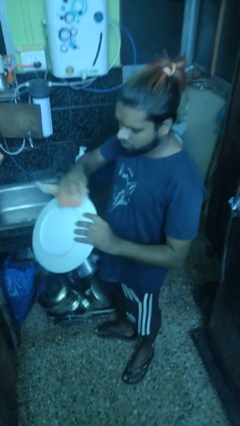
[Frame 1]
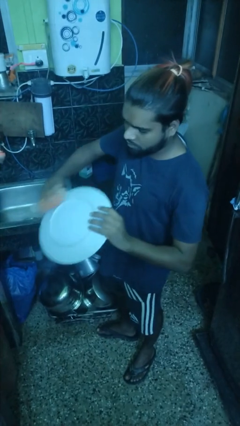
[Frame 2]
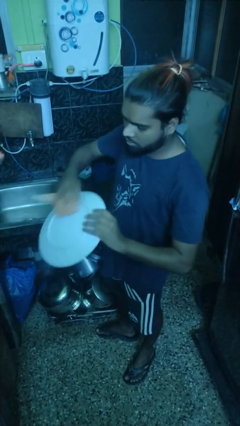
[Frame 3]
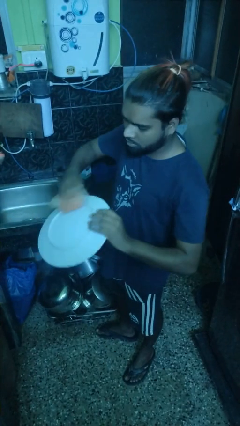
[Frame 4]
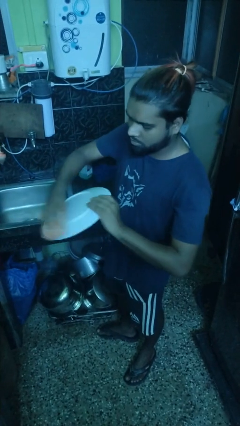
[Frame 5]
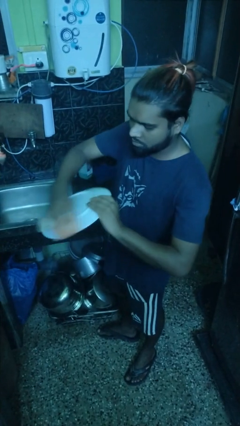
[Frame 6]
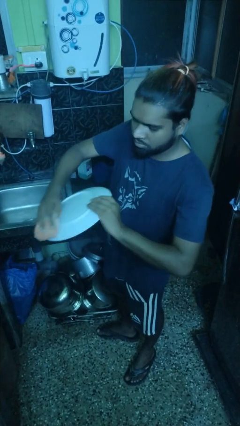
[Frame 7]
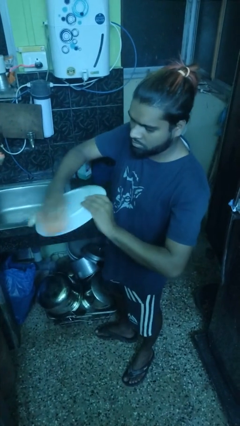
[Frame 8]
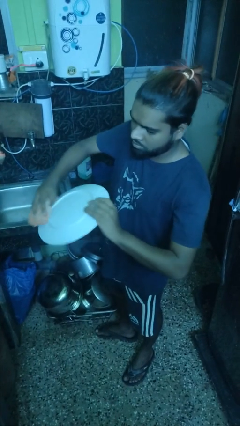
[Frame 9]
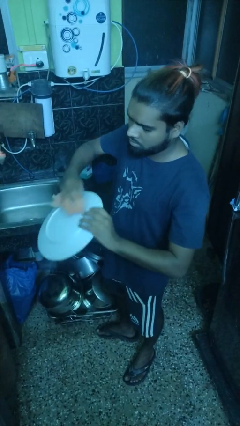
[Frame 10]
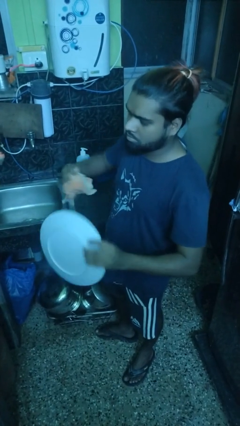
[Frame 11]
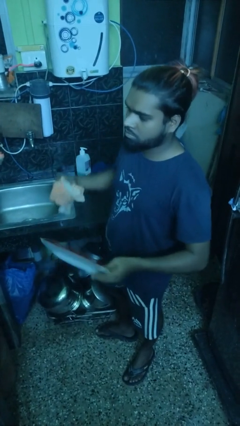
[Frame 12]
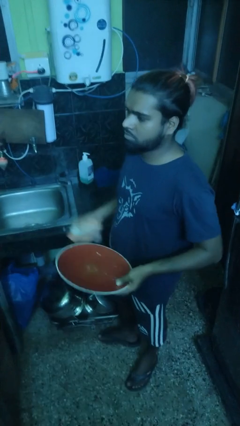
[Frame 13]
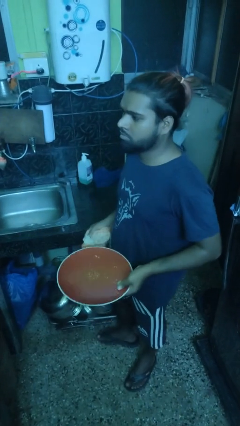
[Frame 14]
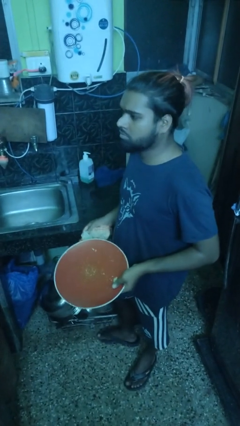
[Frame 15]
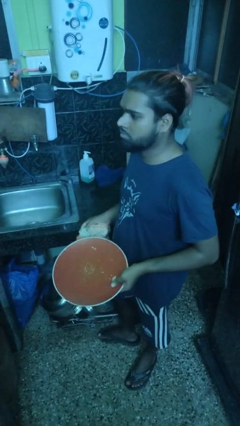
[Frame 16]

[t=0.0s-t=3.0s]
person dries dish

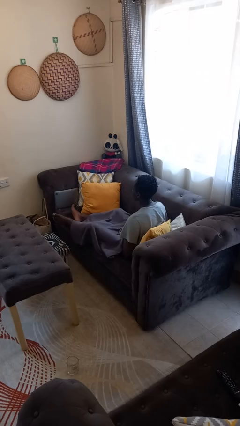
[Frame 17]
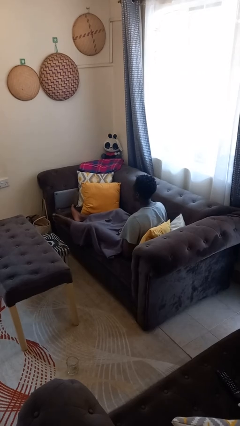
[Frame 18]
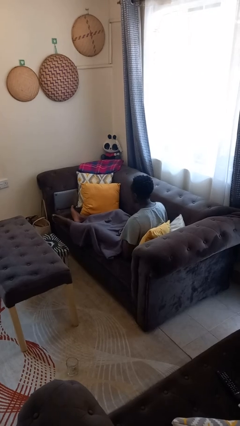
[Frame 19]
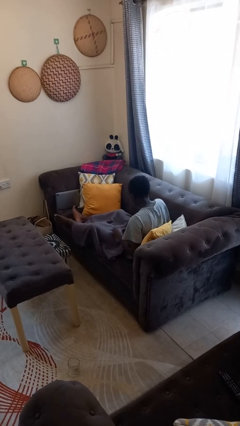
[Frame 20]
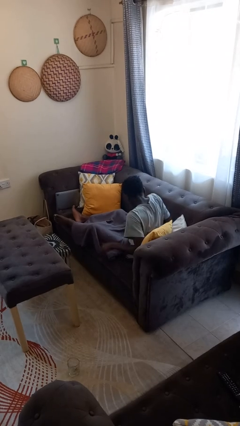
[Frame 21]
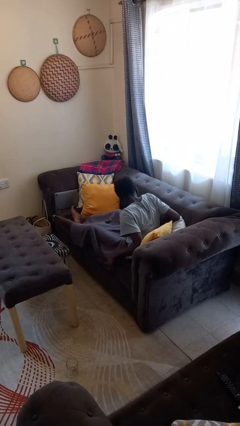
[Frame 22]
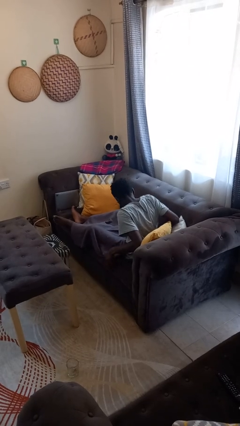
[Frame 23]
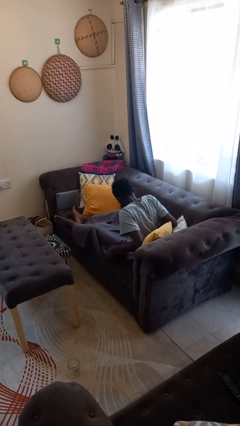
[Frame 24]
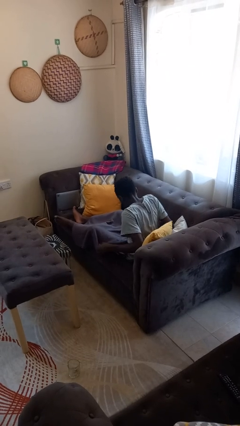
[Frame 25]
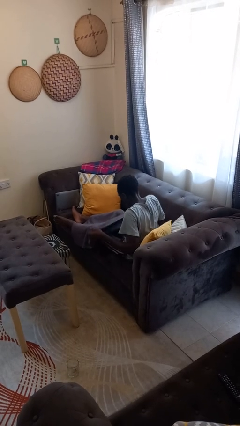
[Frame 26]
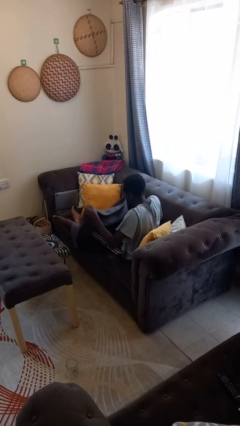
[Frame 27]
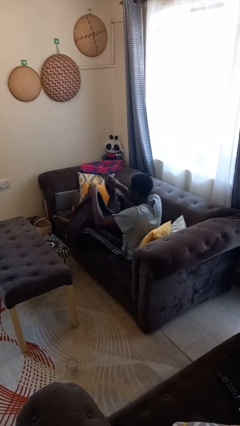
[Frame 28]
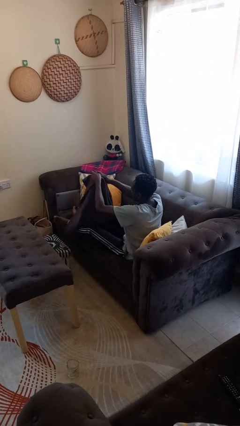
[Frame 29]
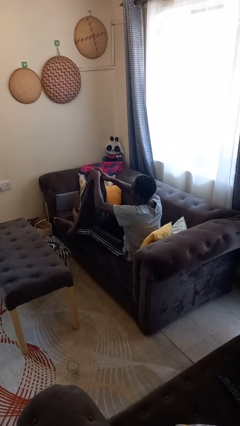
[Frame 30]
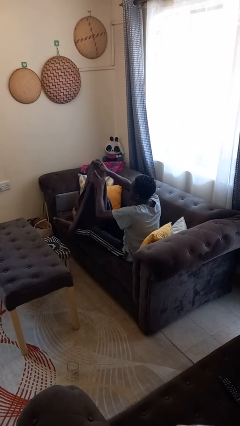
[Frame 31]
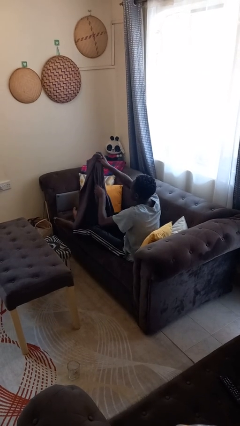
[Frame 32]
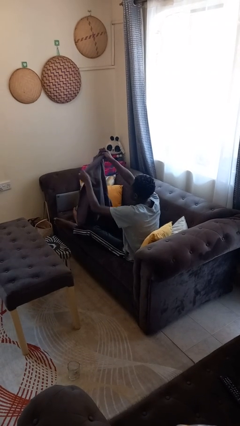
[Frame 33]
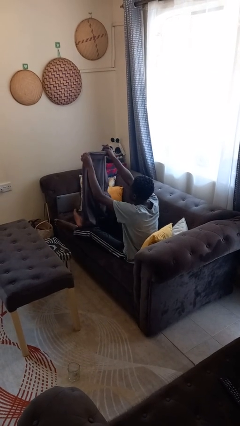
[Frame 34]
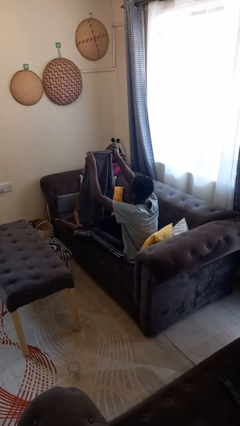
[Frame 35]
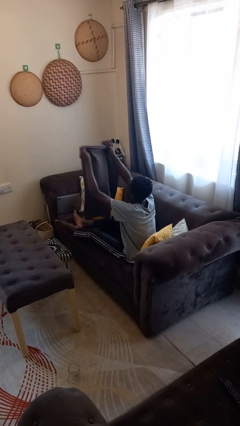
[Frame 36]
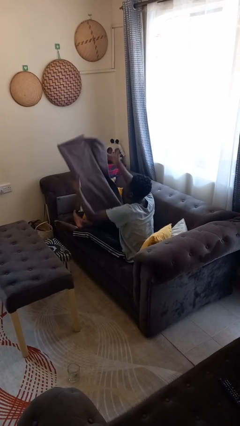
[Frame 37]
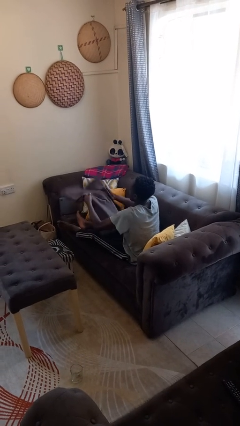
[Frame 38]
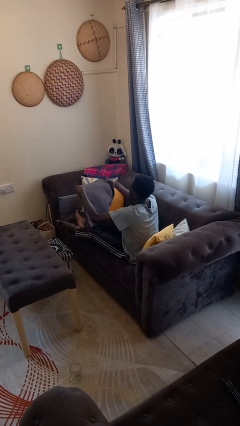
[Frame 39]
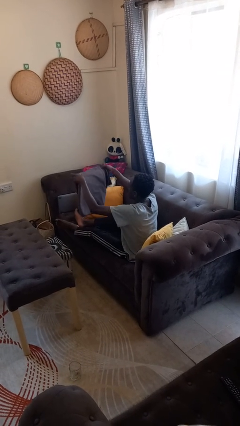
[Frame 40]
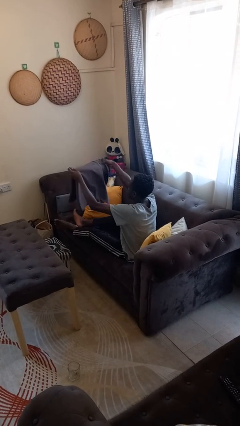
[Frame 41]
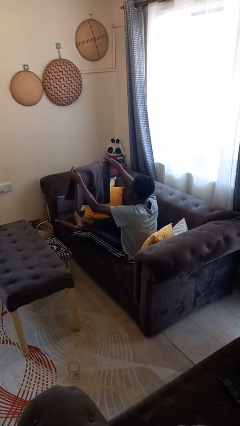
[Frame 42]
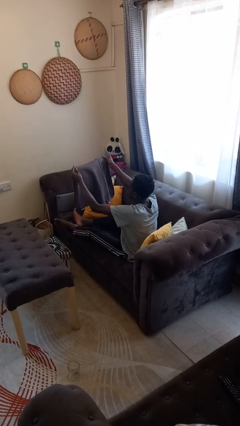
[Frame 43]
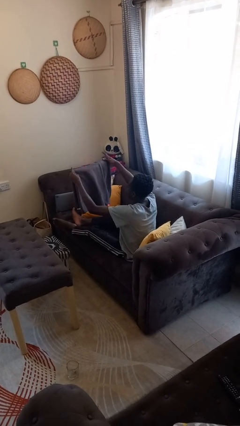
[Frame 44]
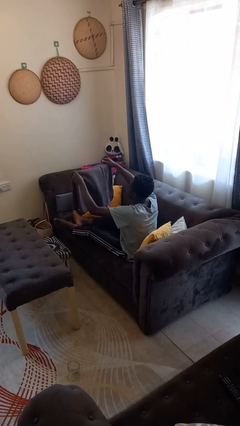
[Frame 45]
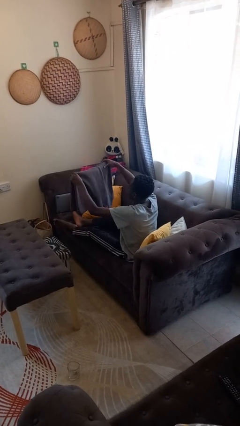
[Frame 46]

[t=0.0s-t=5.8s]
person folds blanket

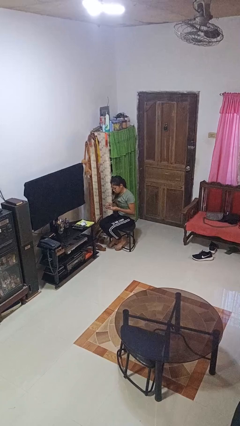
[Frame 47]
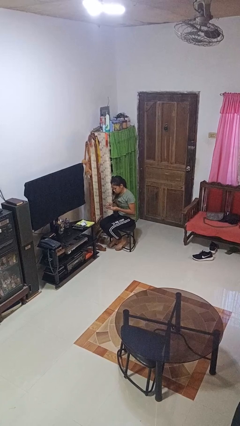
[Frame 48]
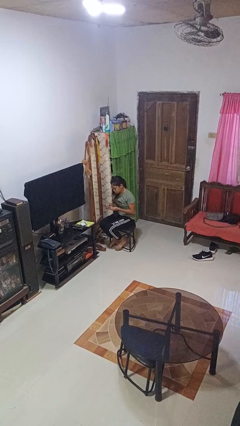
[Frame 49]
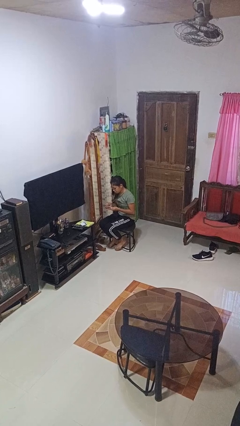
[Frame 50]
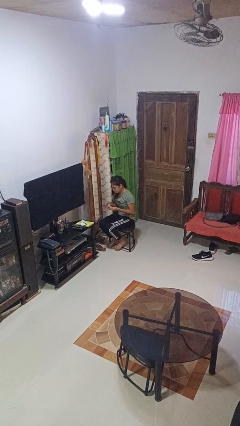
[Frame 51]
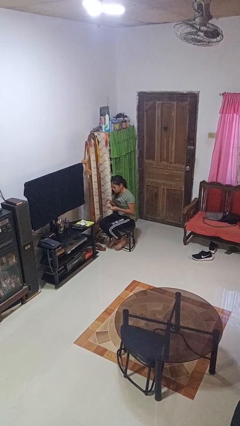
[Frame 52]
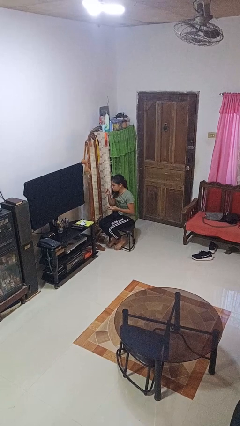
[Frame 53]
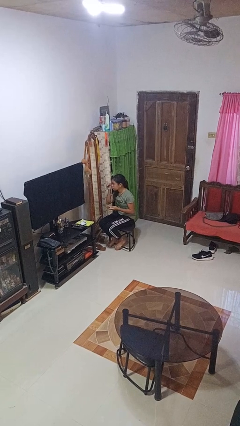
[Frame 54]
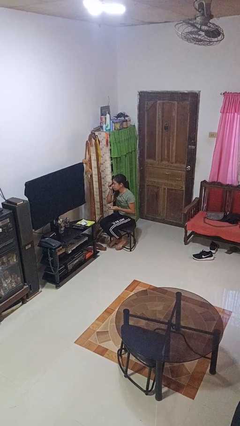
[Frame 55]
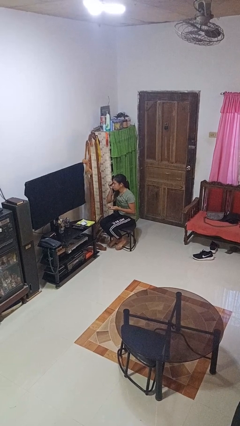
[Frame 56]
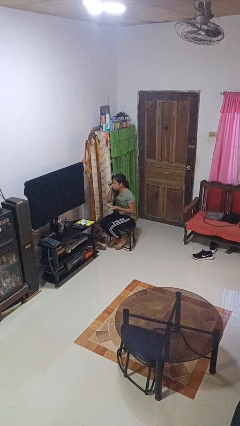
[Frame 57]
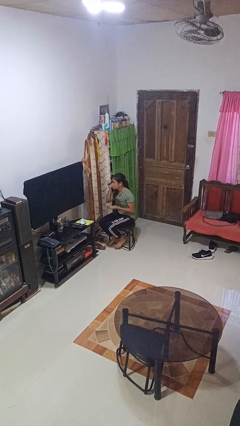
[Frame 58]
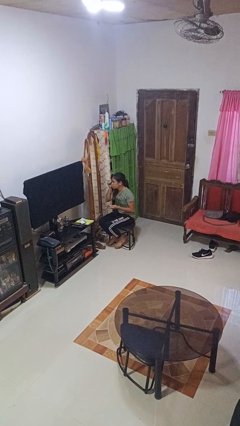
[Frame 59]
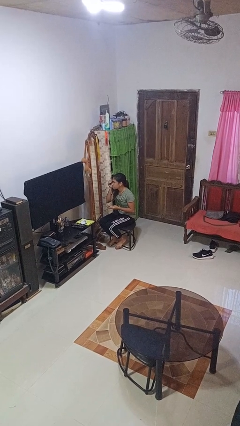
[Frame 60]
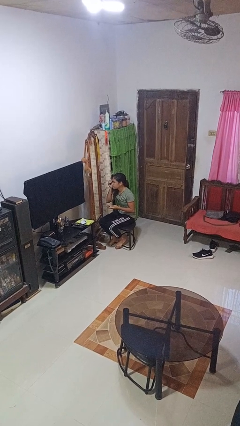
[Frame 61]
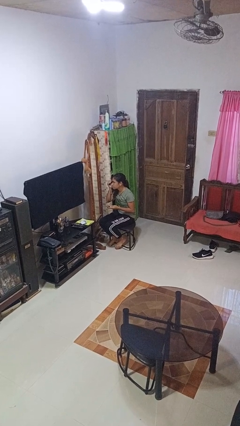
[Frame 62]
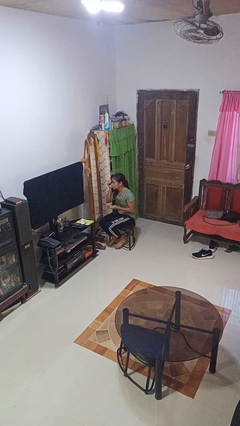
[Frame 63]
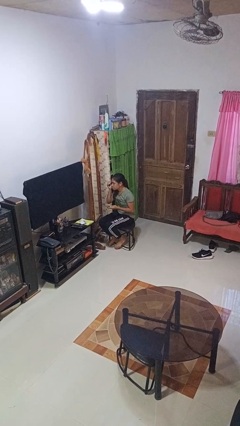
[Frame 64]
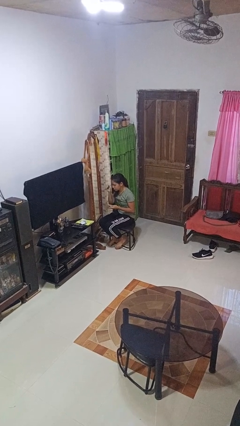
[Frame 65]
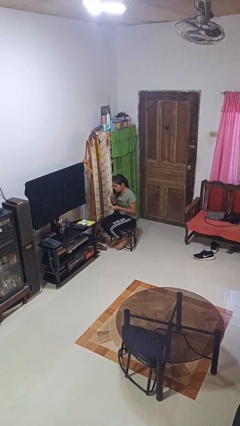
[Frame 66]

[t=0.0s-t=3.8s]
person applies eye makeup

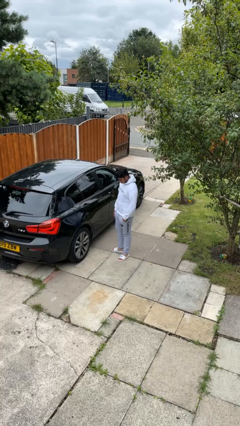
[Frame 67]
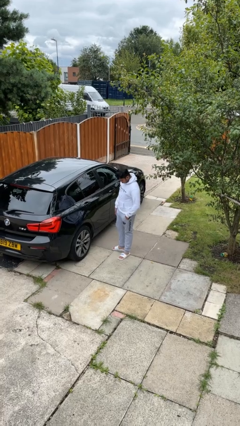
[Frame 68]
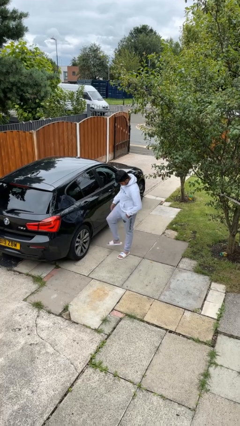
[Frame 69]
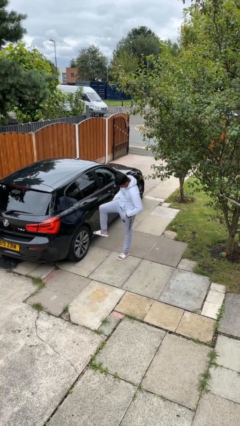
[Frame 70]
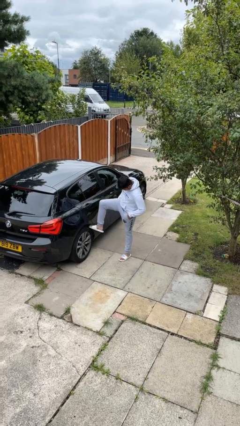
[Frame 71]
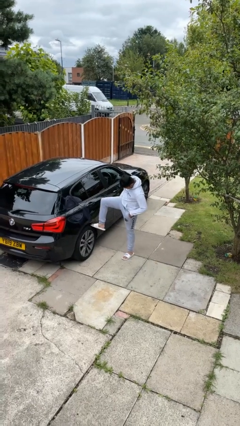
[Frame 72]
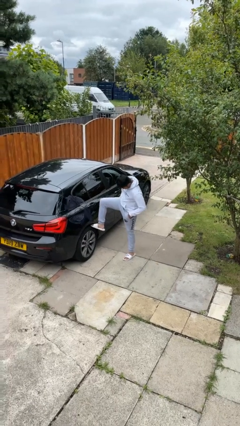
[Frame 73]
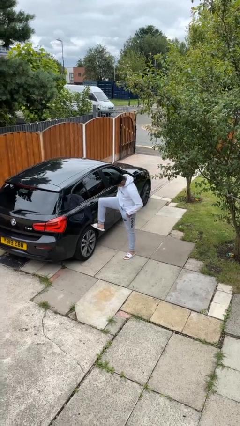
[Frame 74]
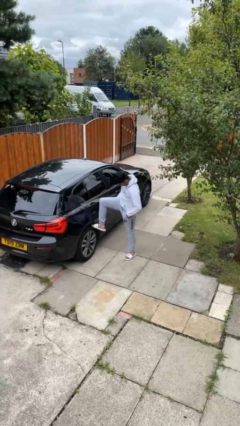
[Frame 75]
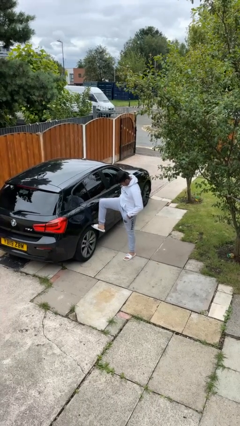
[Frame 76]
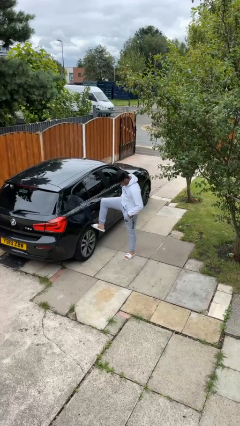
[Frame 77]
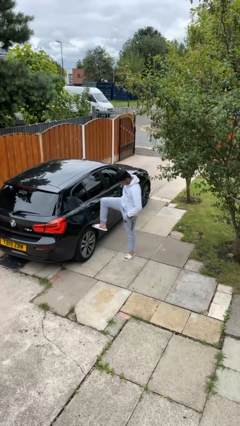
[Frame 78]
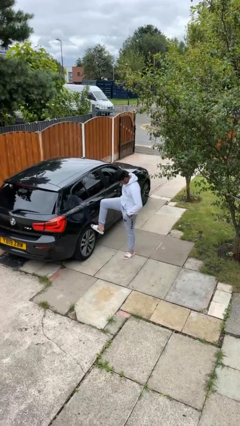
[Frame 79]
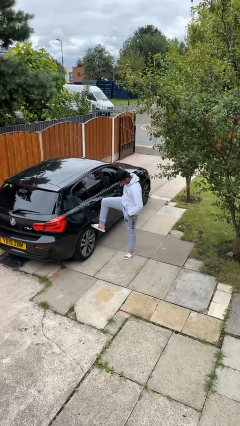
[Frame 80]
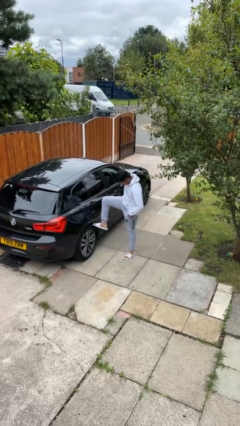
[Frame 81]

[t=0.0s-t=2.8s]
person kicks car tires

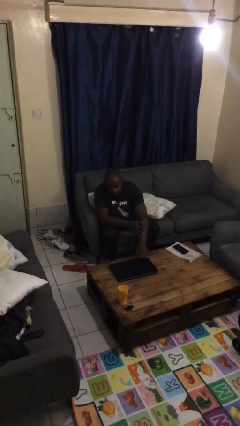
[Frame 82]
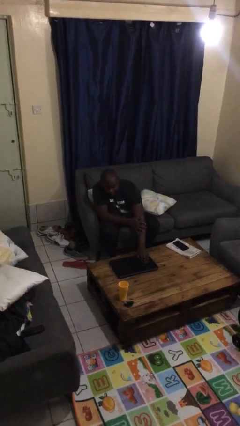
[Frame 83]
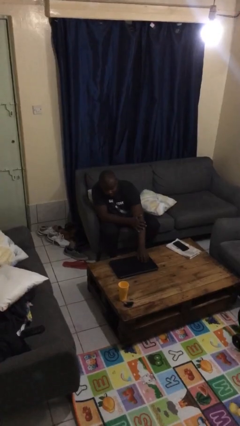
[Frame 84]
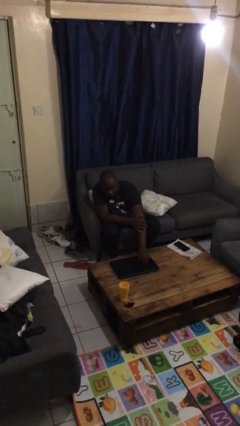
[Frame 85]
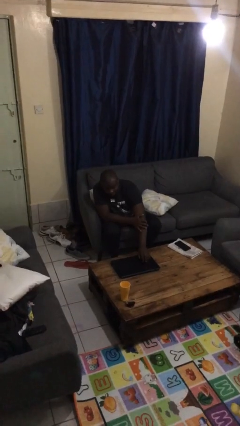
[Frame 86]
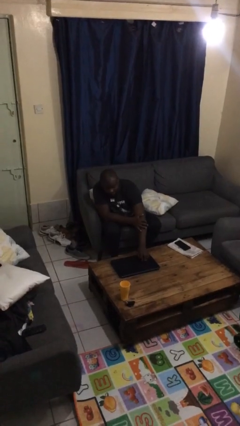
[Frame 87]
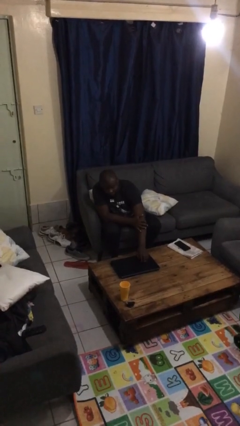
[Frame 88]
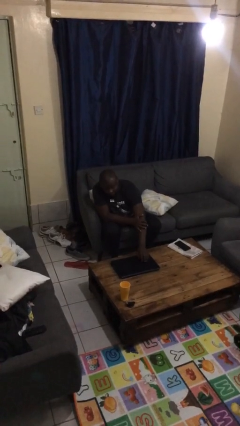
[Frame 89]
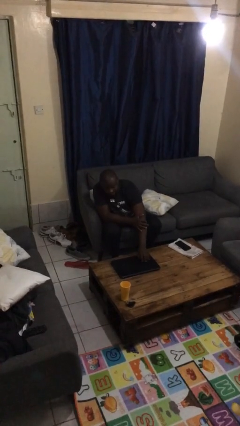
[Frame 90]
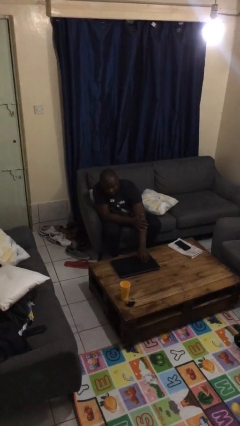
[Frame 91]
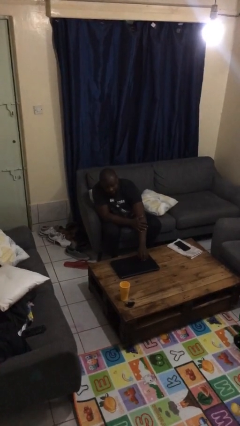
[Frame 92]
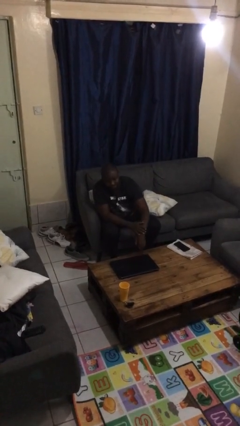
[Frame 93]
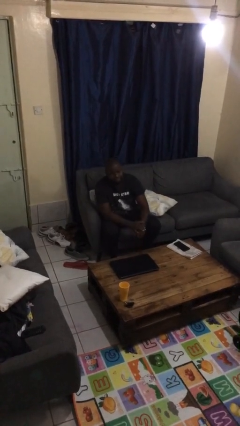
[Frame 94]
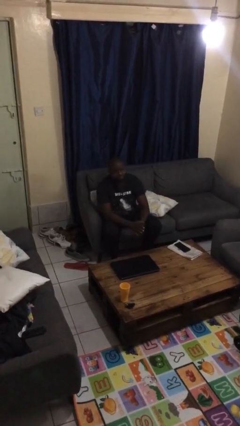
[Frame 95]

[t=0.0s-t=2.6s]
person taps object with finger
